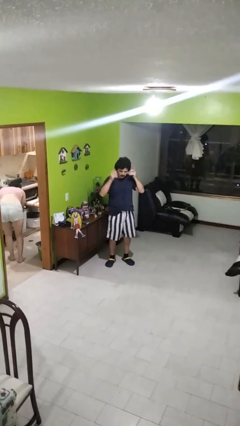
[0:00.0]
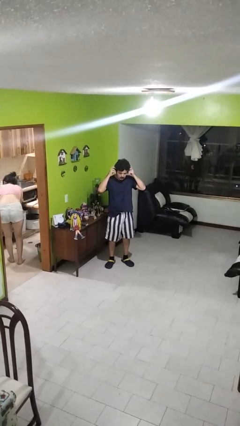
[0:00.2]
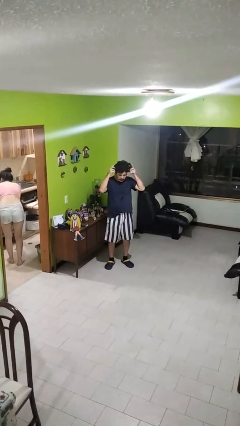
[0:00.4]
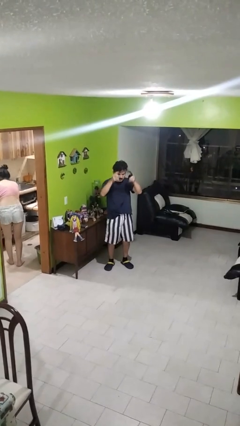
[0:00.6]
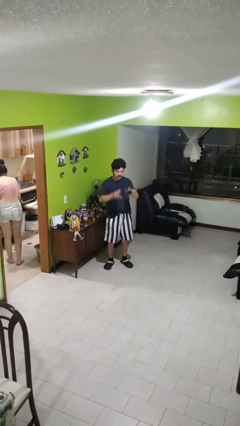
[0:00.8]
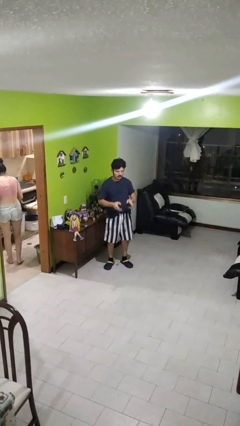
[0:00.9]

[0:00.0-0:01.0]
person takes off headphones

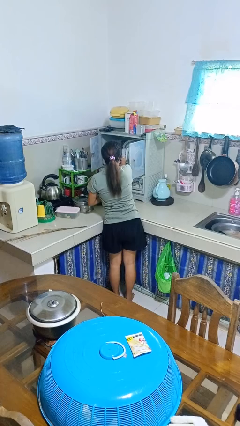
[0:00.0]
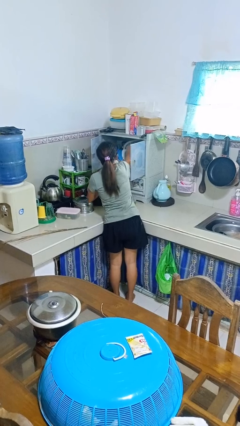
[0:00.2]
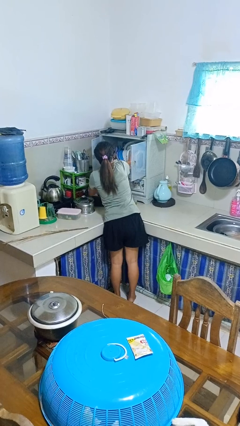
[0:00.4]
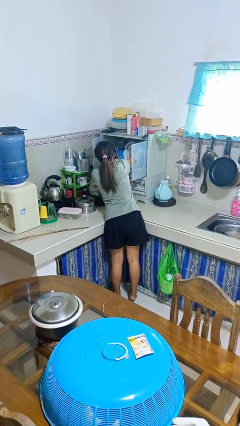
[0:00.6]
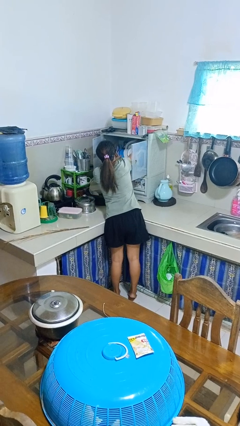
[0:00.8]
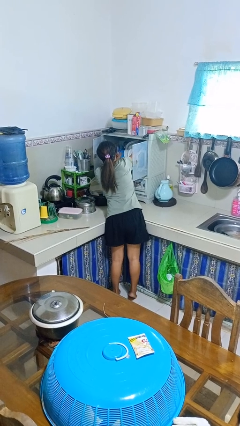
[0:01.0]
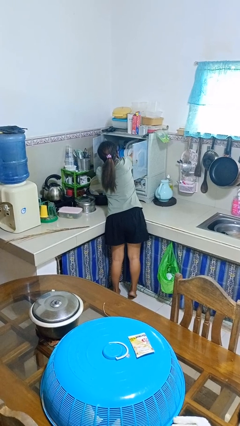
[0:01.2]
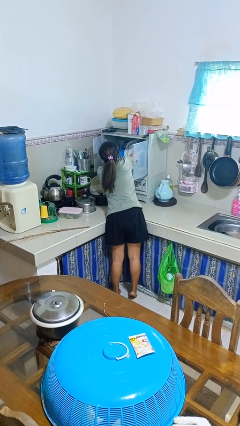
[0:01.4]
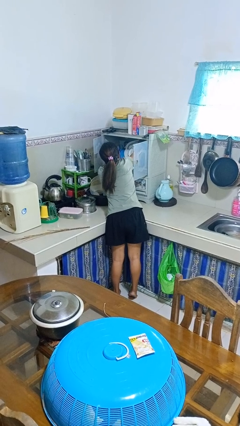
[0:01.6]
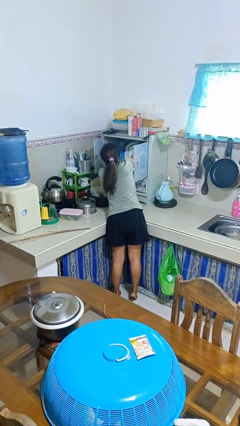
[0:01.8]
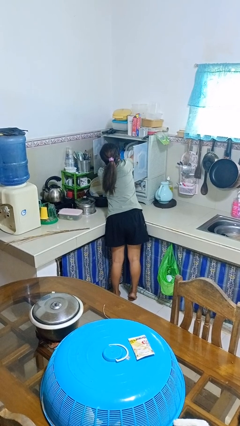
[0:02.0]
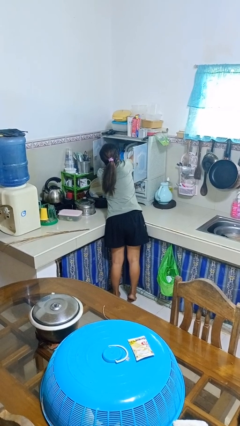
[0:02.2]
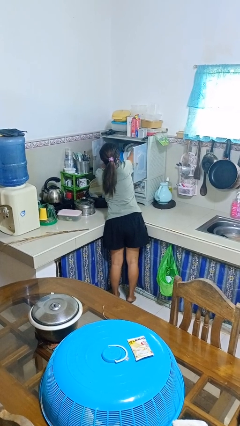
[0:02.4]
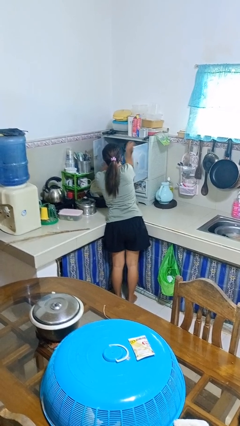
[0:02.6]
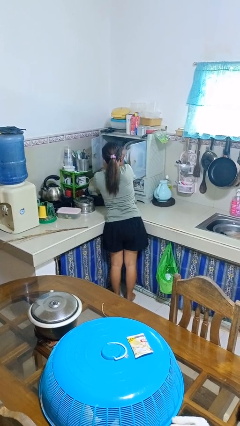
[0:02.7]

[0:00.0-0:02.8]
person searches in kitchen drawer

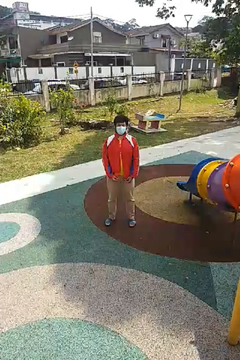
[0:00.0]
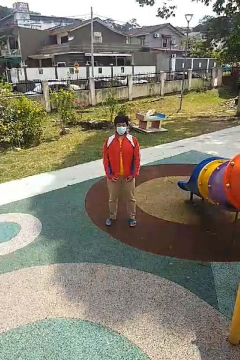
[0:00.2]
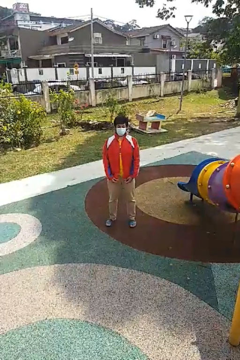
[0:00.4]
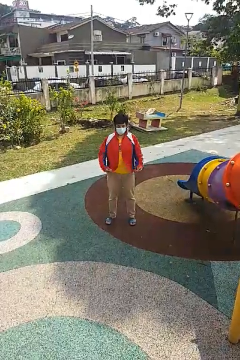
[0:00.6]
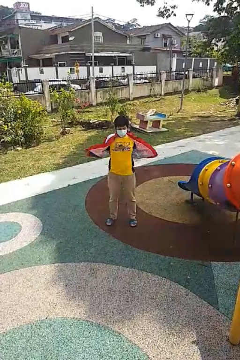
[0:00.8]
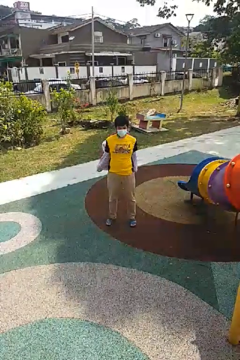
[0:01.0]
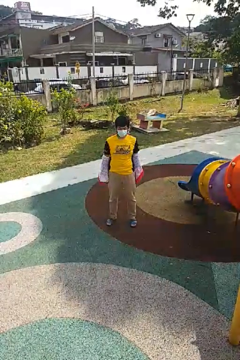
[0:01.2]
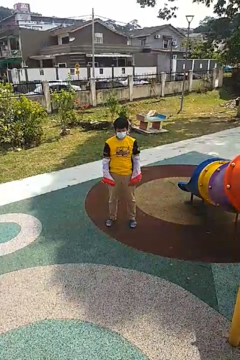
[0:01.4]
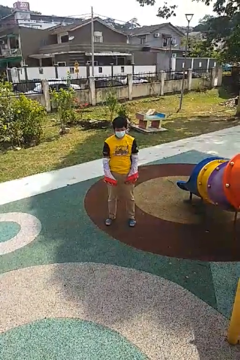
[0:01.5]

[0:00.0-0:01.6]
person takes off jacket

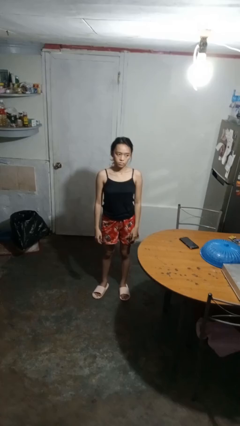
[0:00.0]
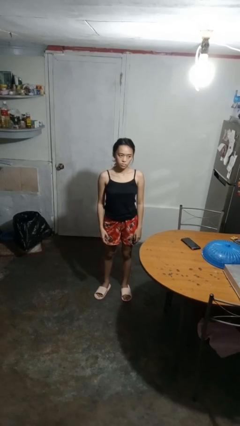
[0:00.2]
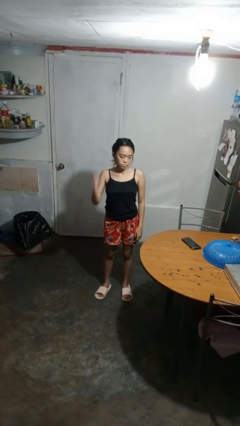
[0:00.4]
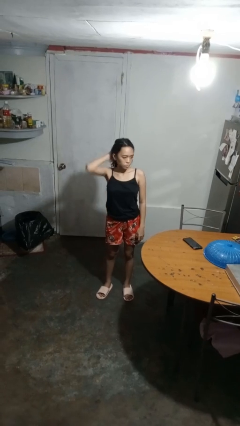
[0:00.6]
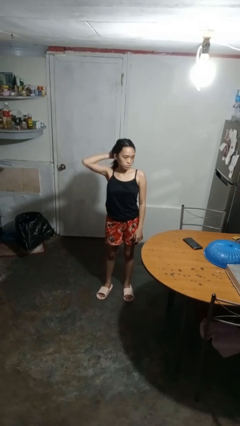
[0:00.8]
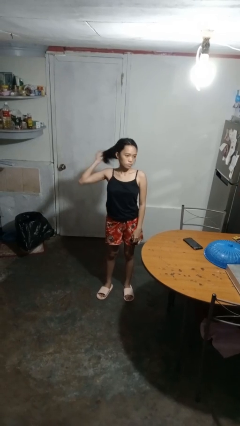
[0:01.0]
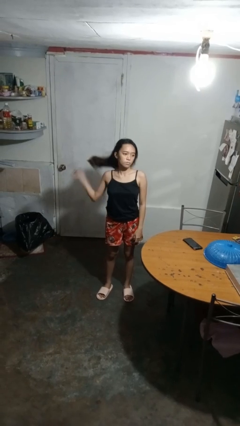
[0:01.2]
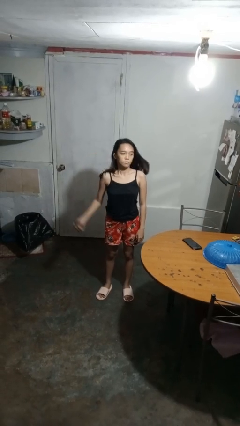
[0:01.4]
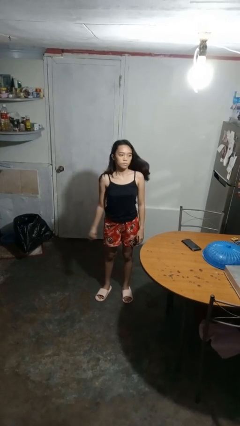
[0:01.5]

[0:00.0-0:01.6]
person takes off hairtie

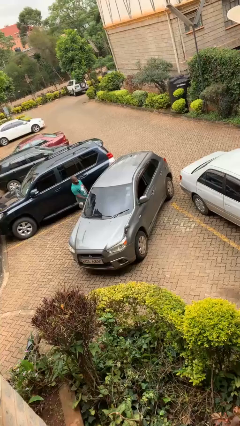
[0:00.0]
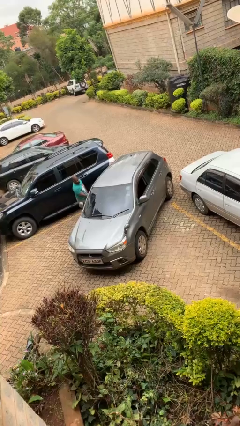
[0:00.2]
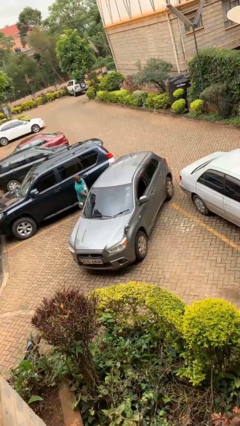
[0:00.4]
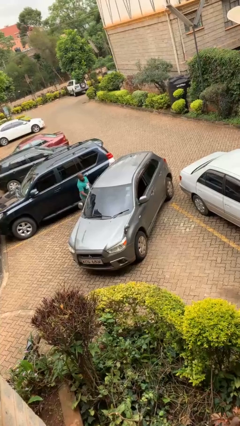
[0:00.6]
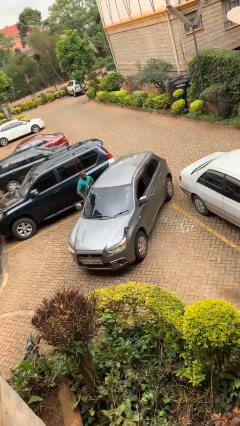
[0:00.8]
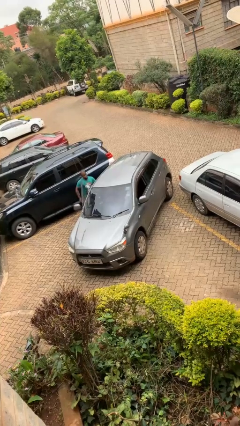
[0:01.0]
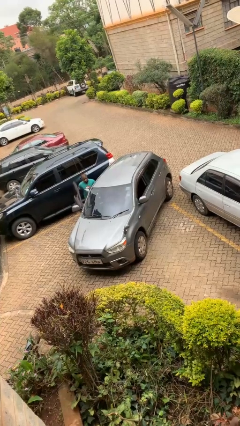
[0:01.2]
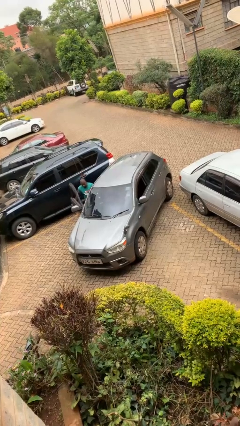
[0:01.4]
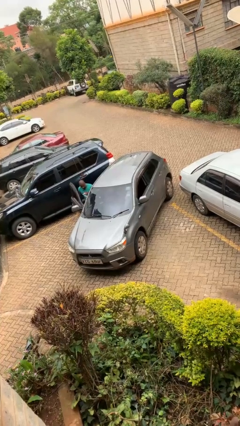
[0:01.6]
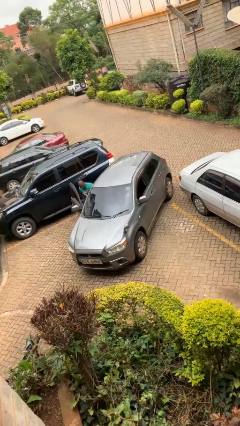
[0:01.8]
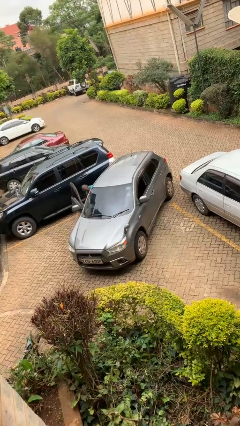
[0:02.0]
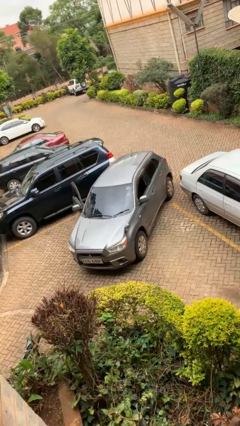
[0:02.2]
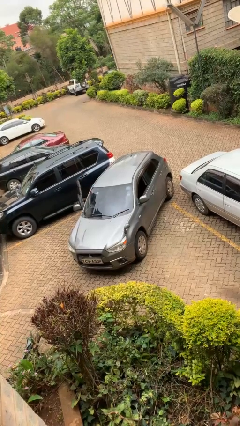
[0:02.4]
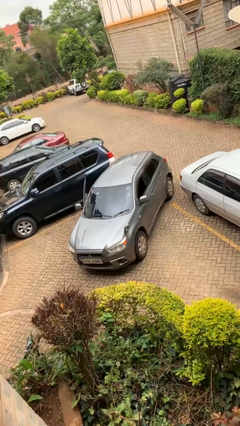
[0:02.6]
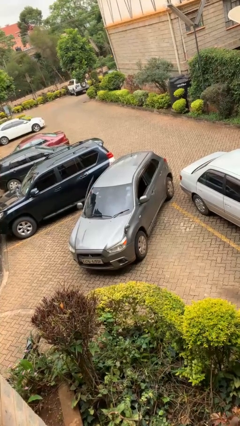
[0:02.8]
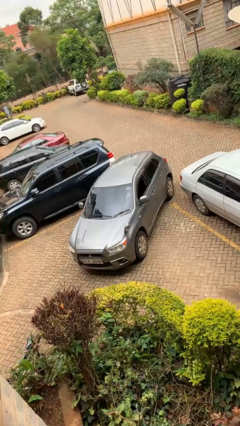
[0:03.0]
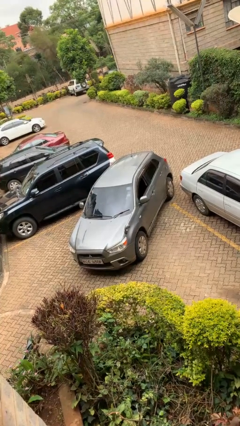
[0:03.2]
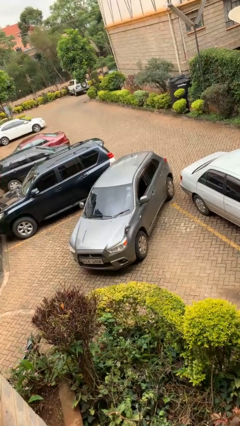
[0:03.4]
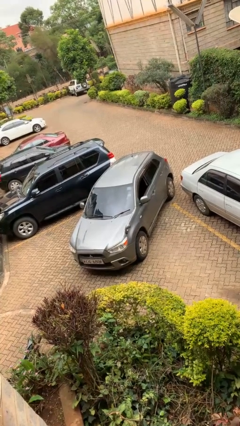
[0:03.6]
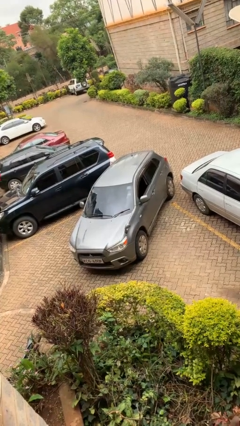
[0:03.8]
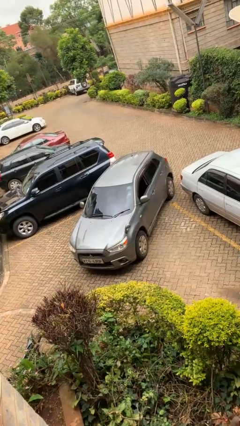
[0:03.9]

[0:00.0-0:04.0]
car picks up person

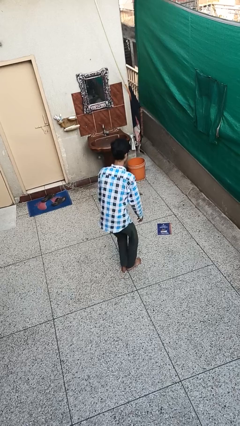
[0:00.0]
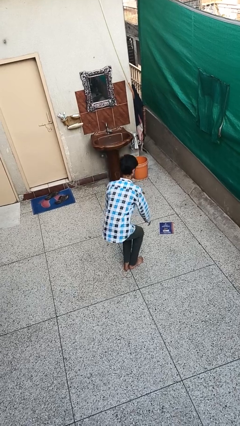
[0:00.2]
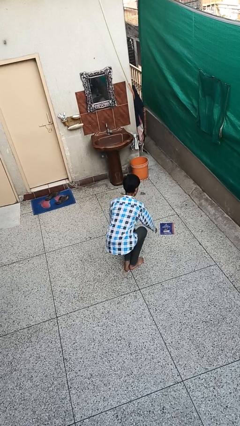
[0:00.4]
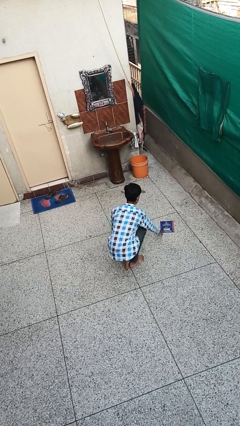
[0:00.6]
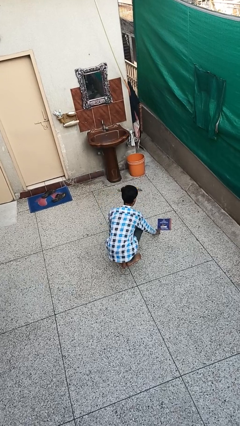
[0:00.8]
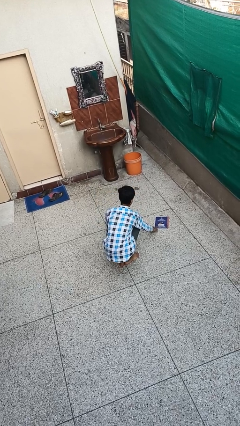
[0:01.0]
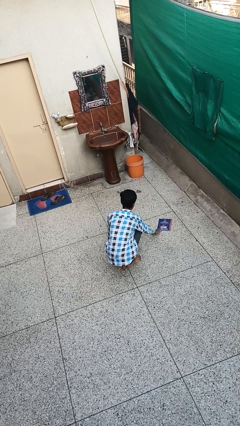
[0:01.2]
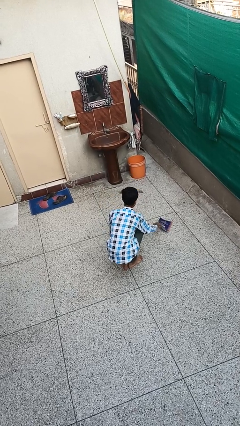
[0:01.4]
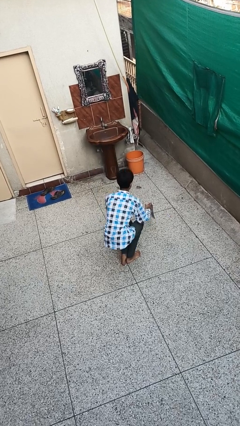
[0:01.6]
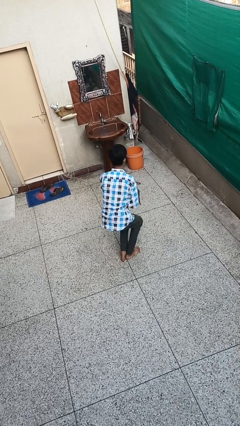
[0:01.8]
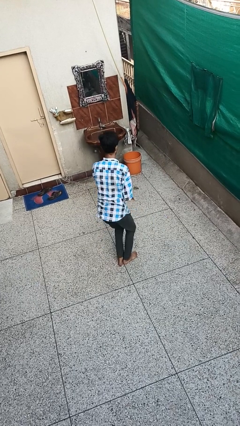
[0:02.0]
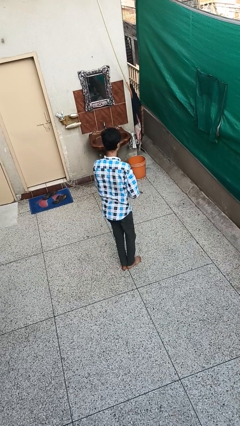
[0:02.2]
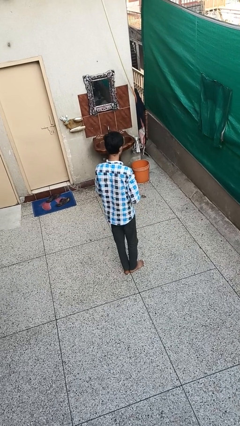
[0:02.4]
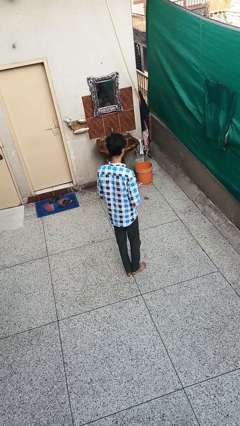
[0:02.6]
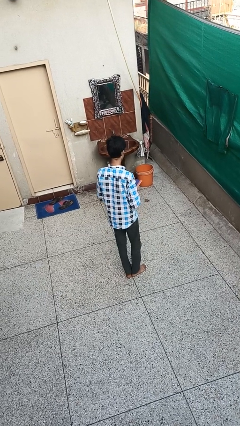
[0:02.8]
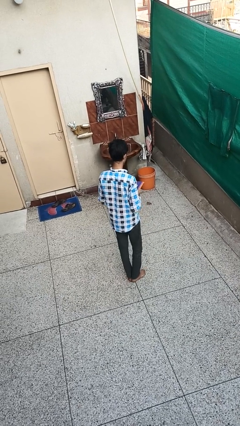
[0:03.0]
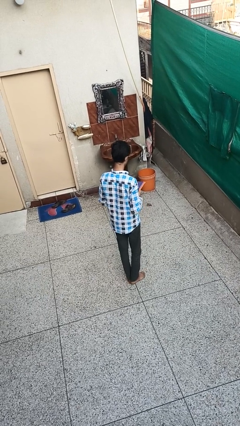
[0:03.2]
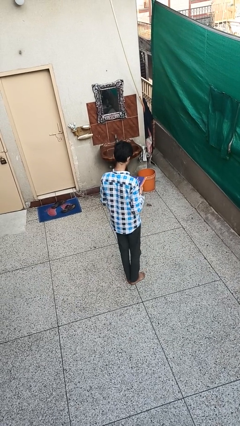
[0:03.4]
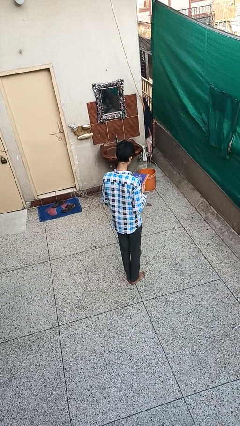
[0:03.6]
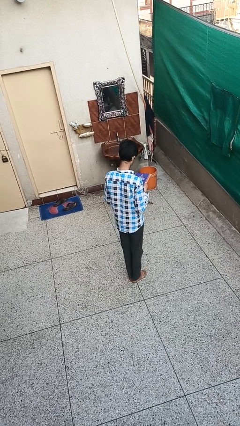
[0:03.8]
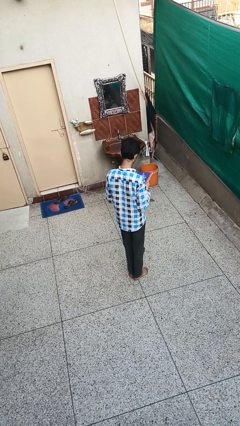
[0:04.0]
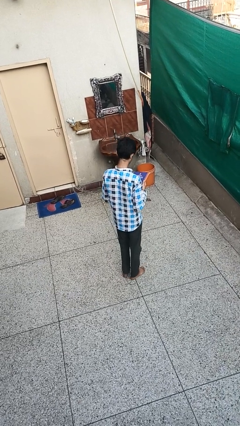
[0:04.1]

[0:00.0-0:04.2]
person picks up object from floor

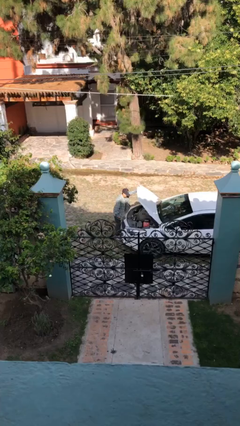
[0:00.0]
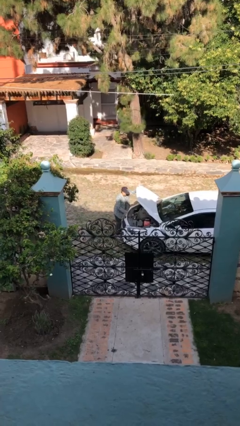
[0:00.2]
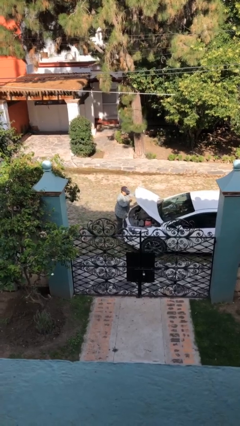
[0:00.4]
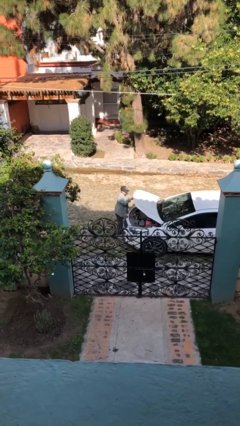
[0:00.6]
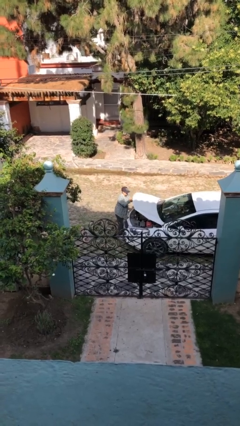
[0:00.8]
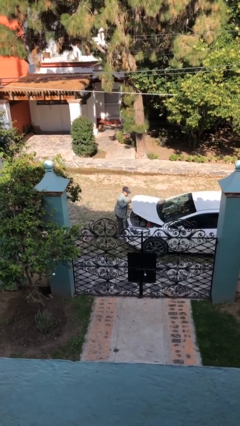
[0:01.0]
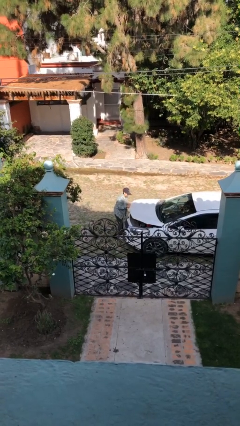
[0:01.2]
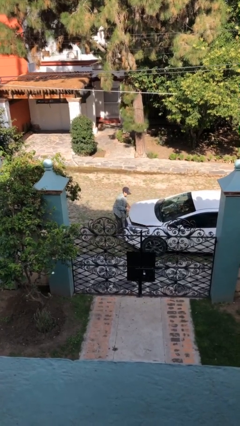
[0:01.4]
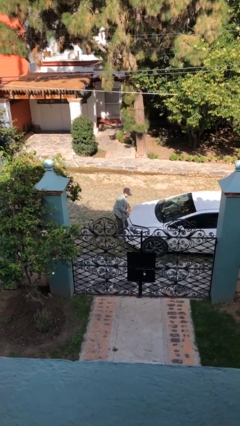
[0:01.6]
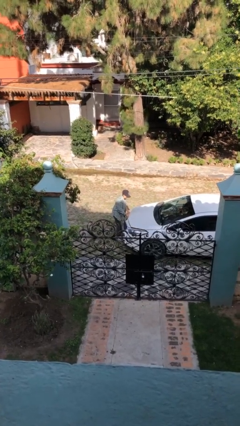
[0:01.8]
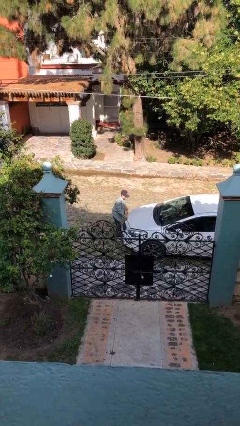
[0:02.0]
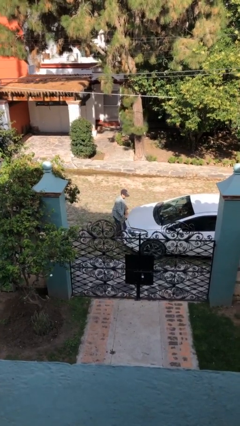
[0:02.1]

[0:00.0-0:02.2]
person closes car hood
